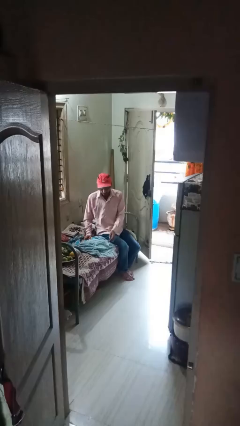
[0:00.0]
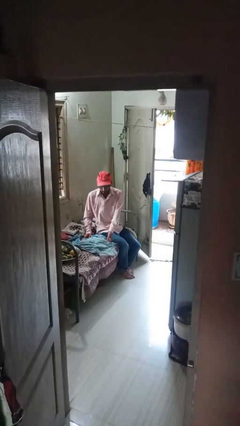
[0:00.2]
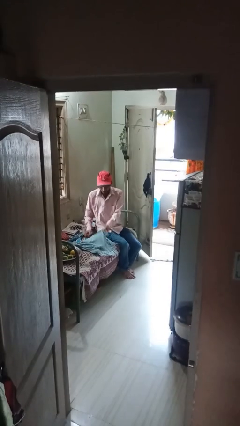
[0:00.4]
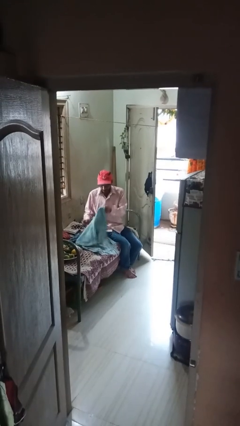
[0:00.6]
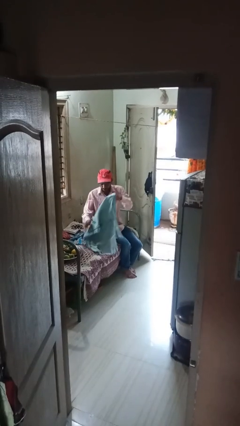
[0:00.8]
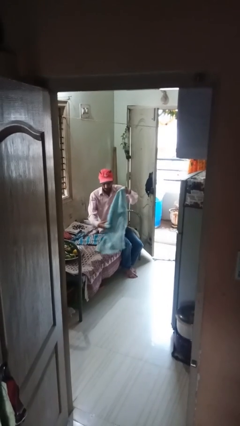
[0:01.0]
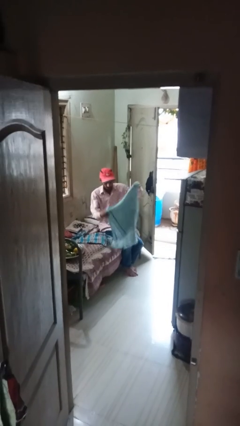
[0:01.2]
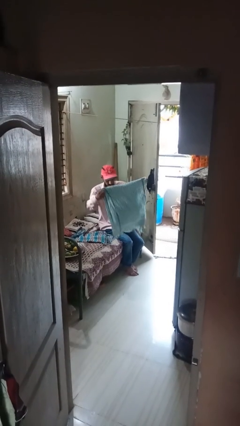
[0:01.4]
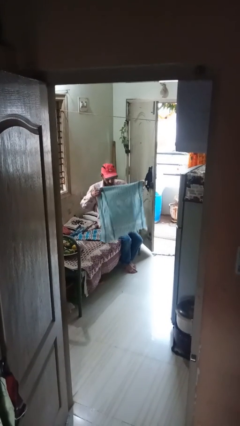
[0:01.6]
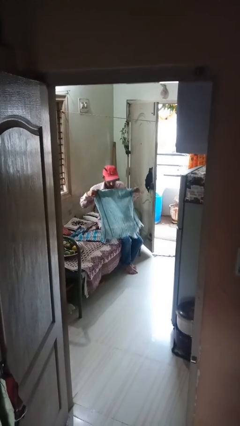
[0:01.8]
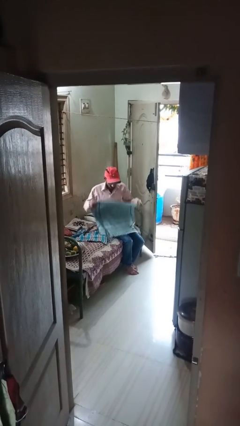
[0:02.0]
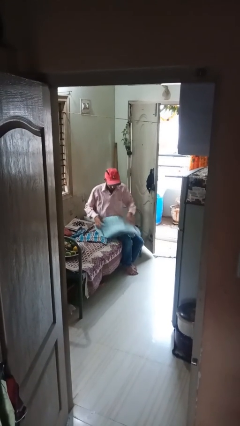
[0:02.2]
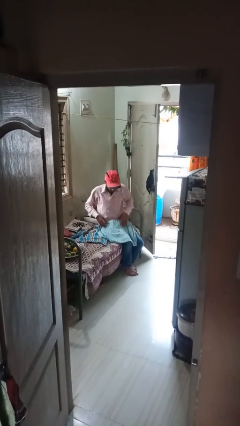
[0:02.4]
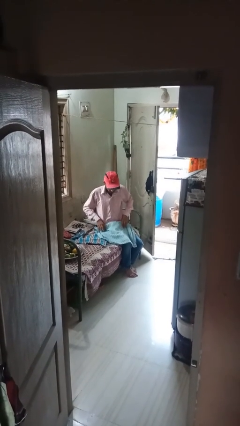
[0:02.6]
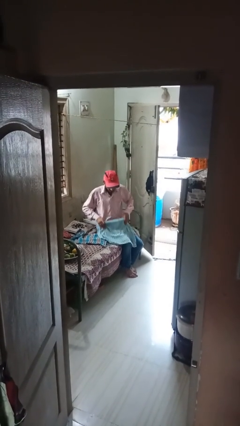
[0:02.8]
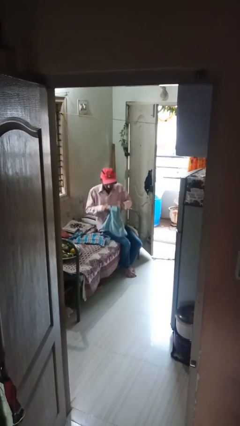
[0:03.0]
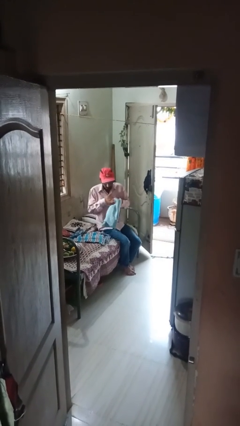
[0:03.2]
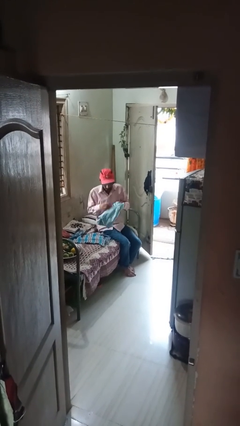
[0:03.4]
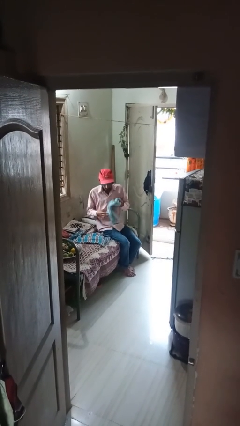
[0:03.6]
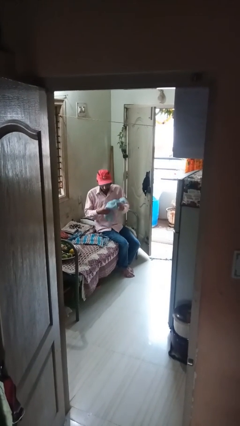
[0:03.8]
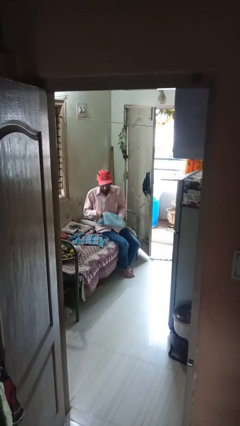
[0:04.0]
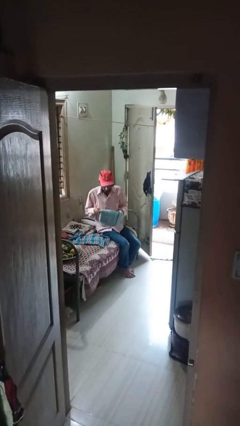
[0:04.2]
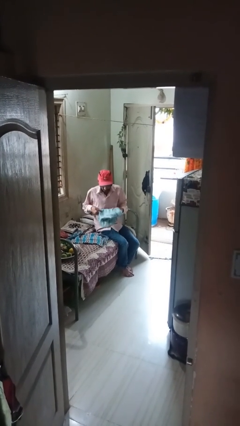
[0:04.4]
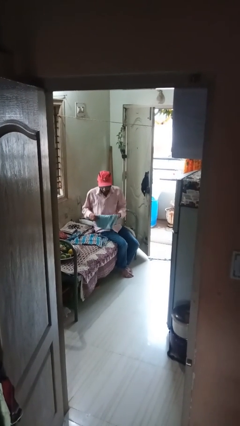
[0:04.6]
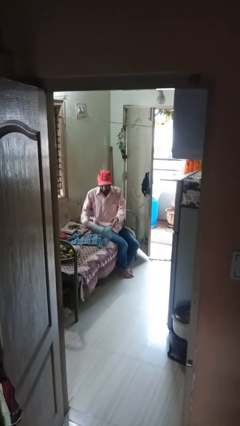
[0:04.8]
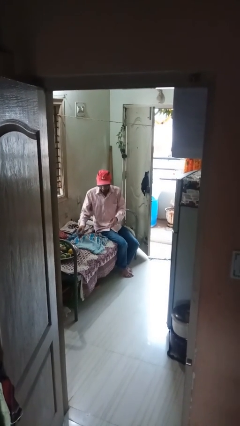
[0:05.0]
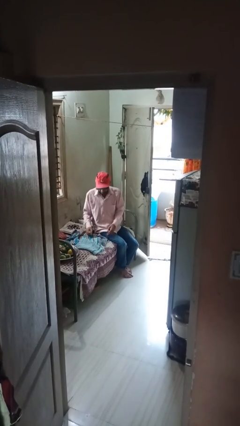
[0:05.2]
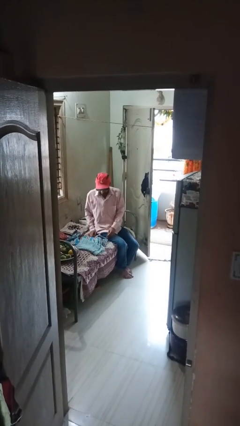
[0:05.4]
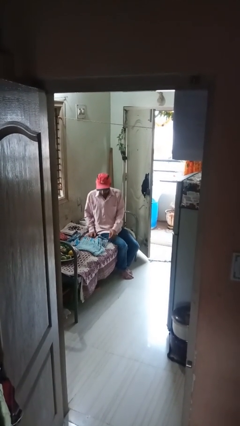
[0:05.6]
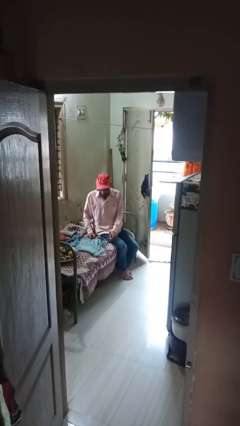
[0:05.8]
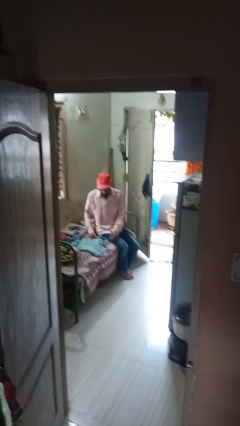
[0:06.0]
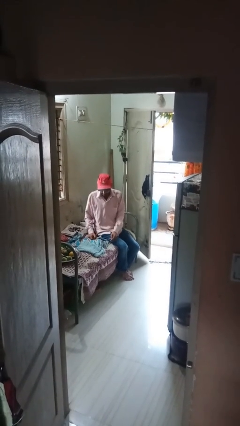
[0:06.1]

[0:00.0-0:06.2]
person folds towel

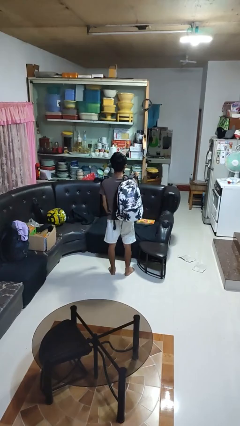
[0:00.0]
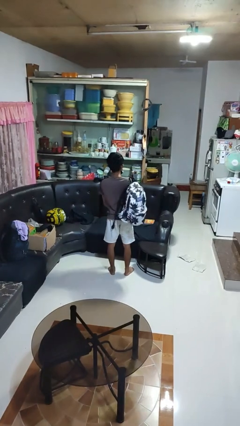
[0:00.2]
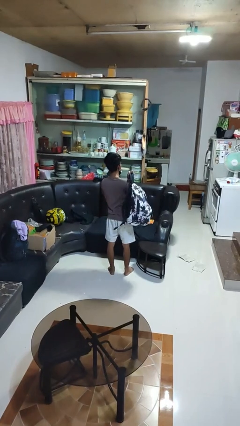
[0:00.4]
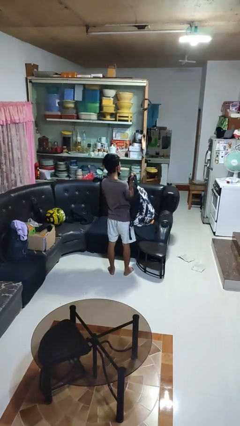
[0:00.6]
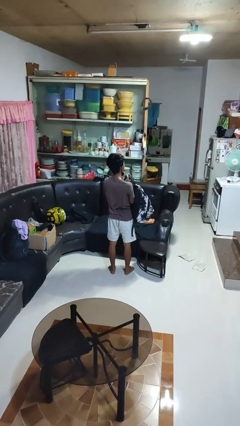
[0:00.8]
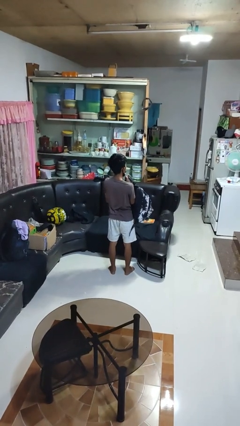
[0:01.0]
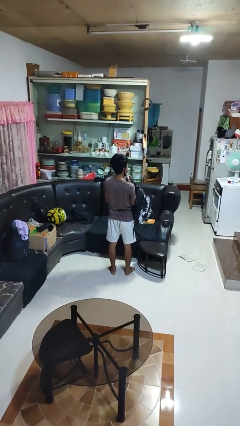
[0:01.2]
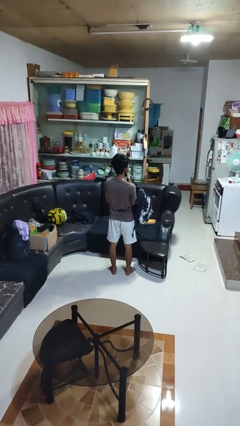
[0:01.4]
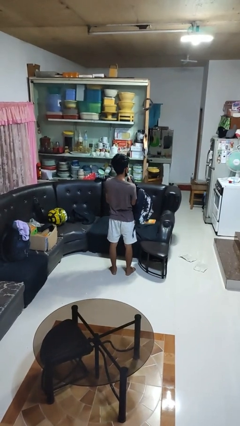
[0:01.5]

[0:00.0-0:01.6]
person takes off backpack

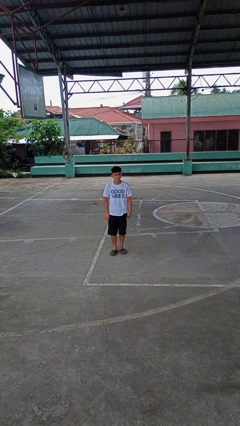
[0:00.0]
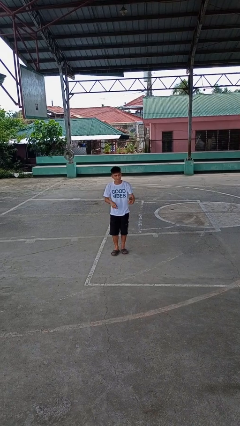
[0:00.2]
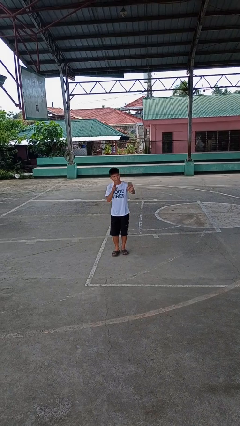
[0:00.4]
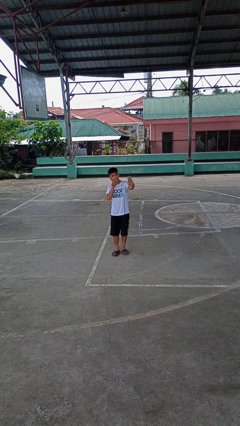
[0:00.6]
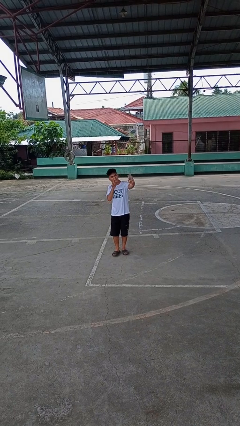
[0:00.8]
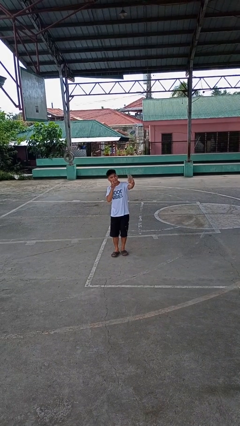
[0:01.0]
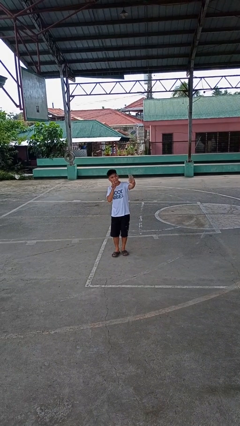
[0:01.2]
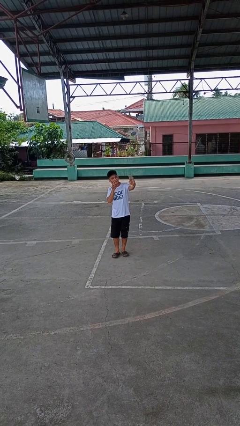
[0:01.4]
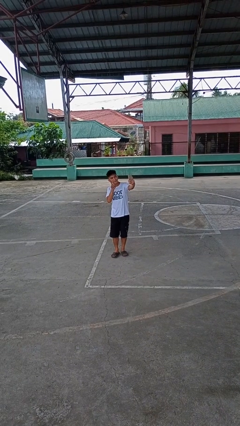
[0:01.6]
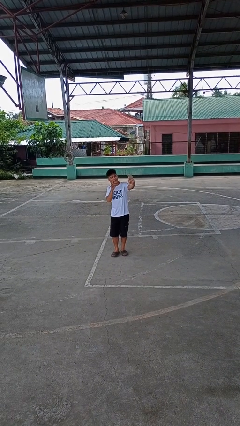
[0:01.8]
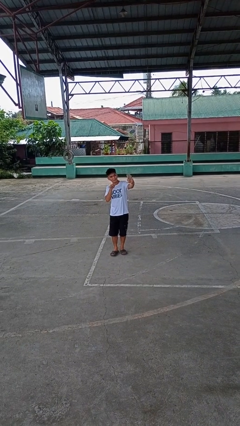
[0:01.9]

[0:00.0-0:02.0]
person takes selfie

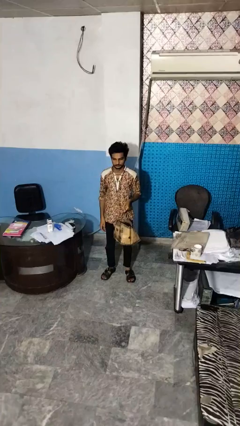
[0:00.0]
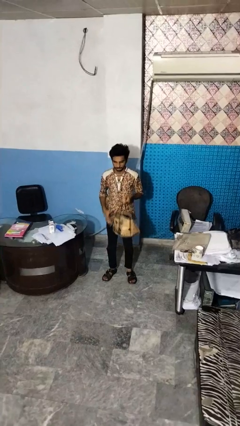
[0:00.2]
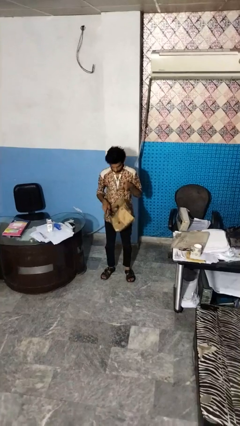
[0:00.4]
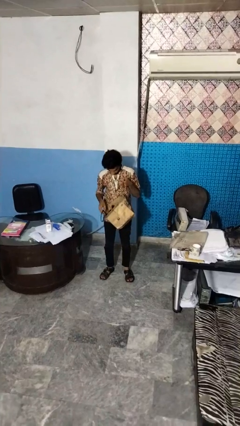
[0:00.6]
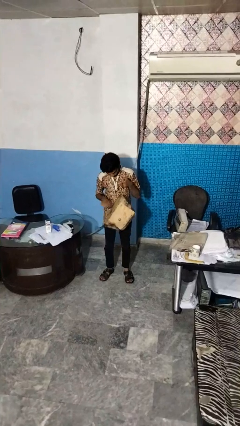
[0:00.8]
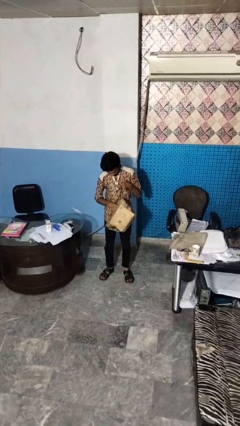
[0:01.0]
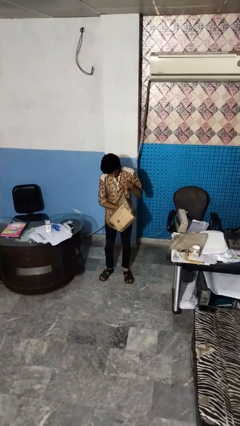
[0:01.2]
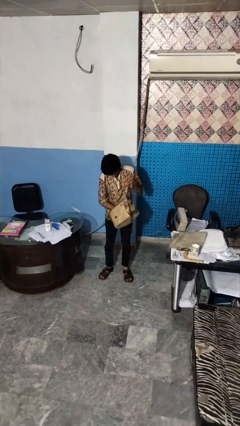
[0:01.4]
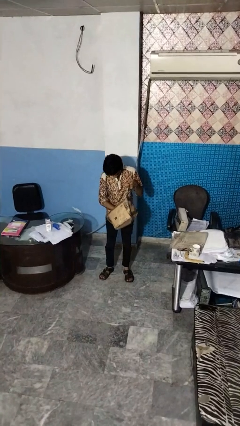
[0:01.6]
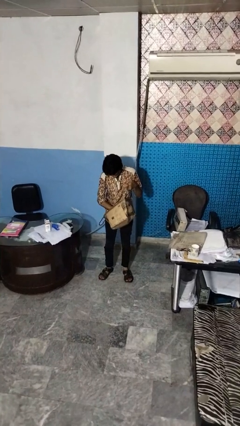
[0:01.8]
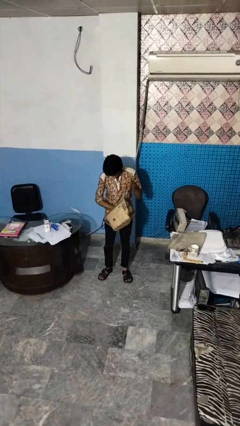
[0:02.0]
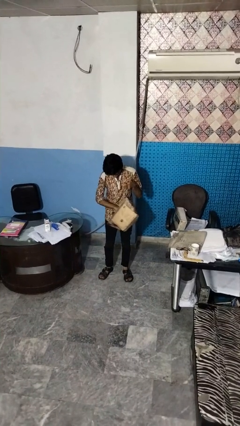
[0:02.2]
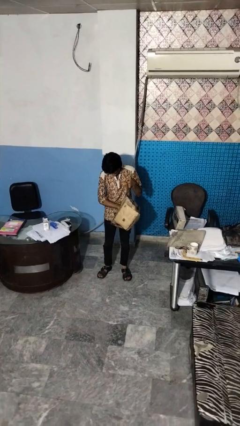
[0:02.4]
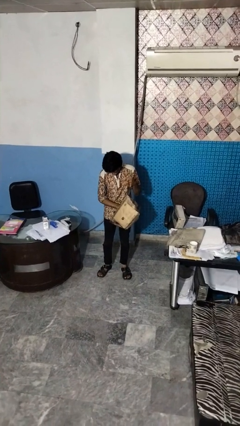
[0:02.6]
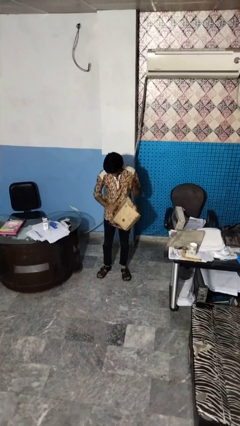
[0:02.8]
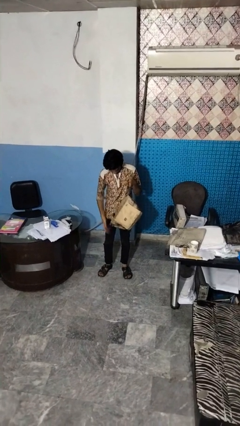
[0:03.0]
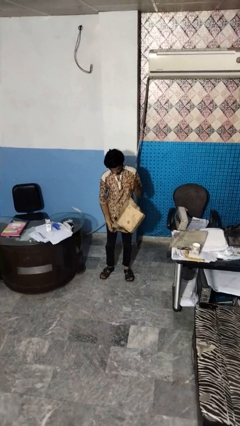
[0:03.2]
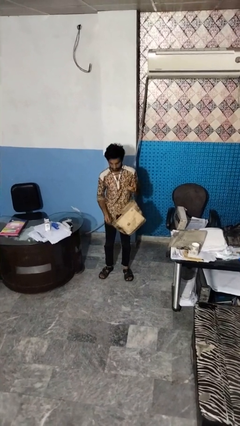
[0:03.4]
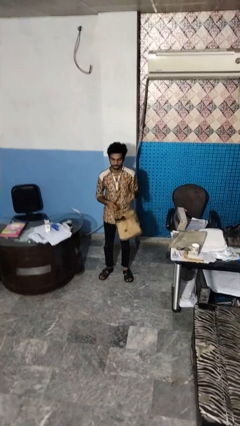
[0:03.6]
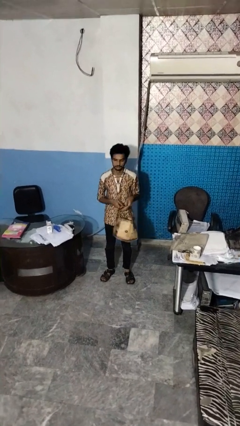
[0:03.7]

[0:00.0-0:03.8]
person searches in bag

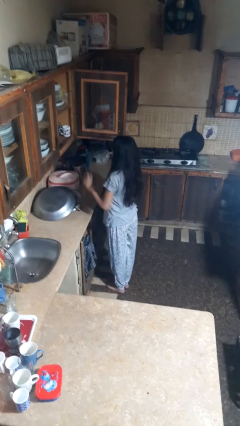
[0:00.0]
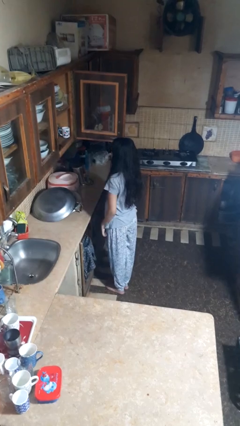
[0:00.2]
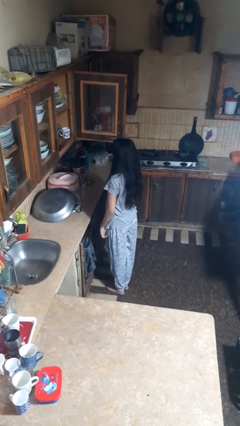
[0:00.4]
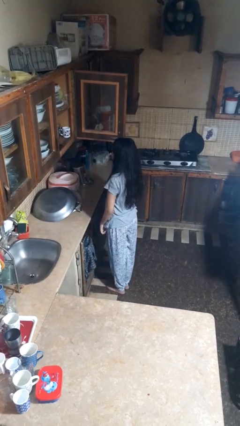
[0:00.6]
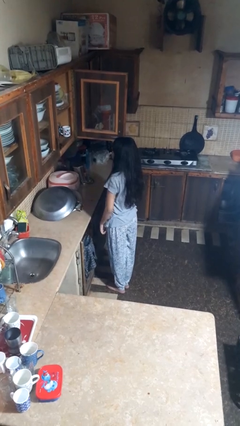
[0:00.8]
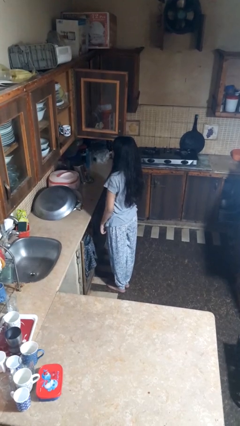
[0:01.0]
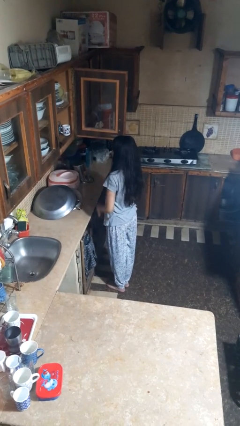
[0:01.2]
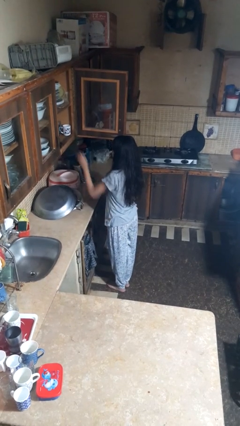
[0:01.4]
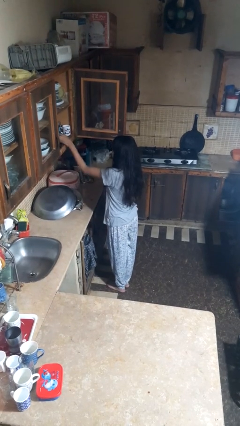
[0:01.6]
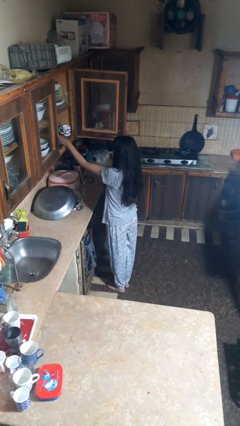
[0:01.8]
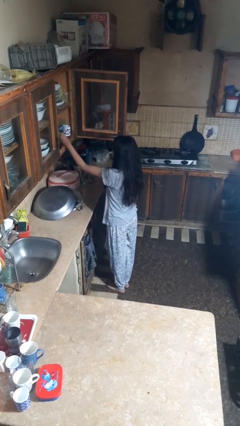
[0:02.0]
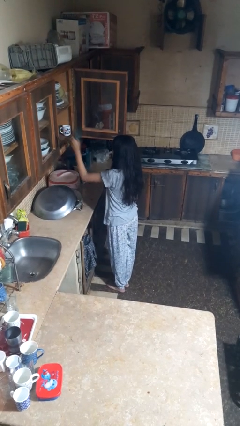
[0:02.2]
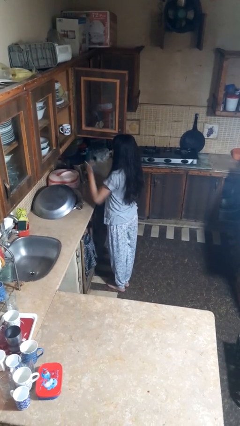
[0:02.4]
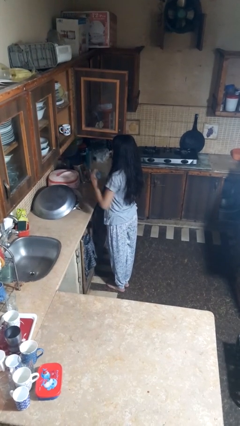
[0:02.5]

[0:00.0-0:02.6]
person takes object from cabinet

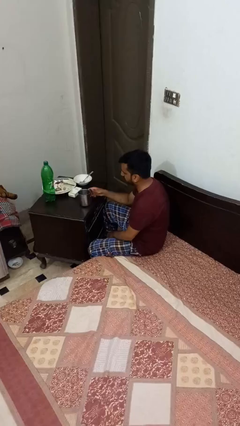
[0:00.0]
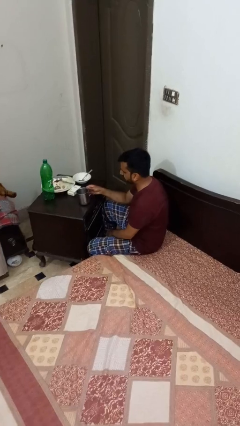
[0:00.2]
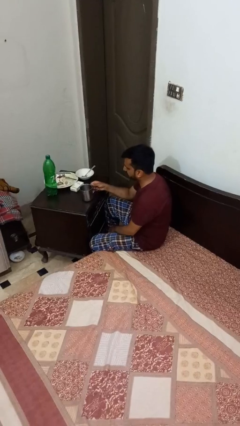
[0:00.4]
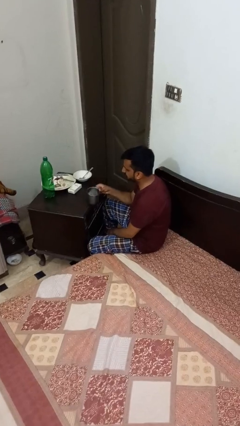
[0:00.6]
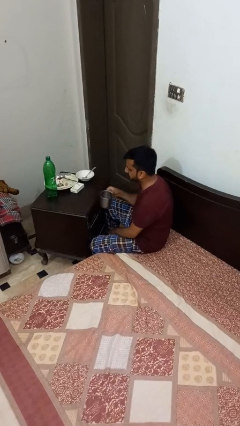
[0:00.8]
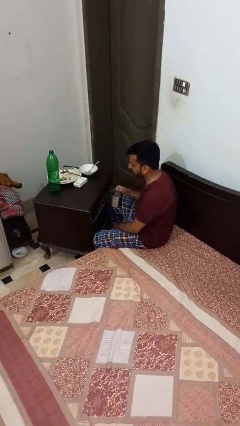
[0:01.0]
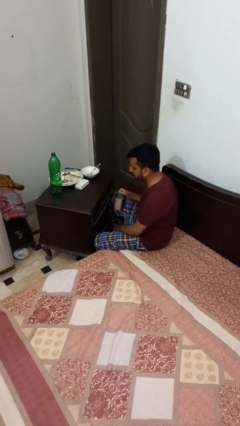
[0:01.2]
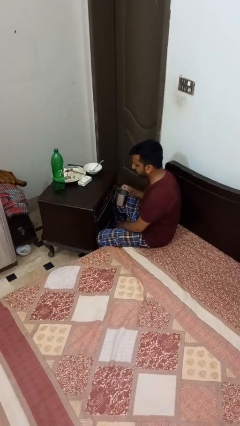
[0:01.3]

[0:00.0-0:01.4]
person picks up object from table
